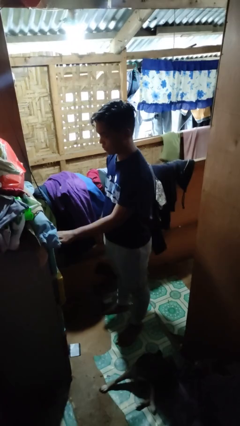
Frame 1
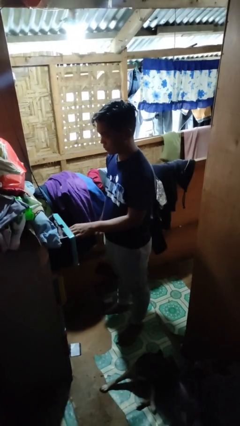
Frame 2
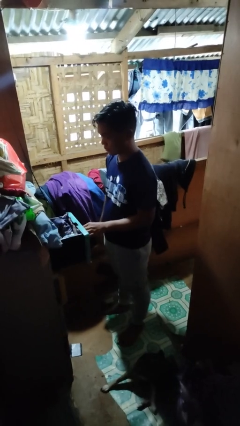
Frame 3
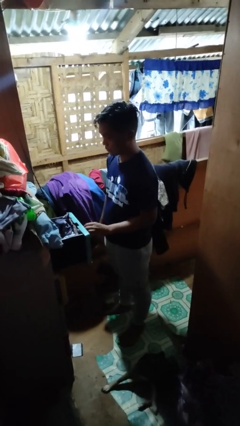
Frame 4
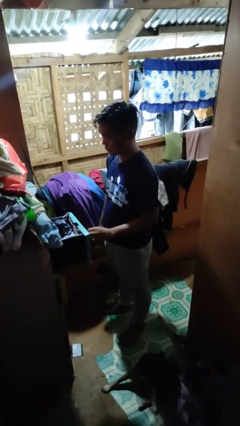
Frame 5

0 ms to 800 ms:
person opens dresser drawer

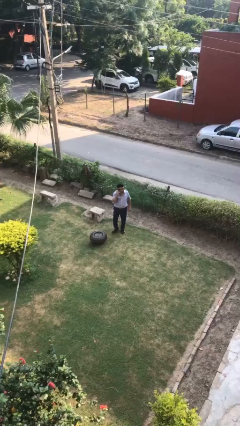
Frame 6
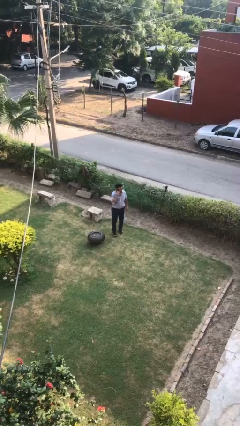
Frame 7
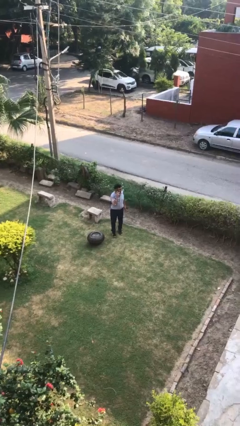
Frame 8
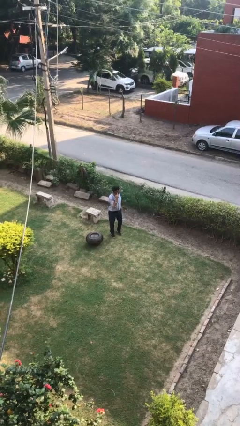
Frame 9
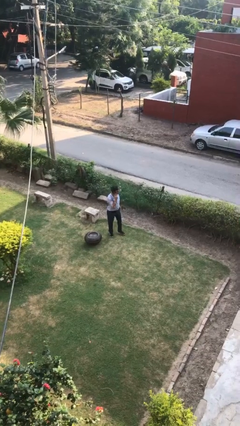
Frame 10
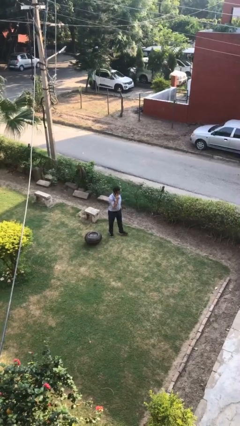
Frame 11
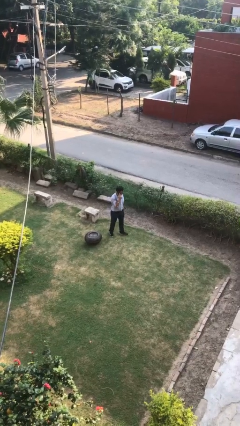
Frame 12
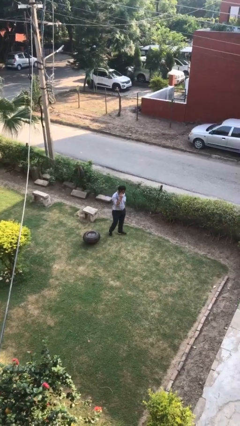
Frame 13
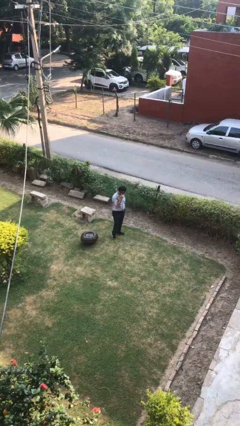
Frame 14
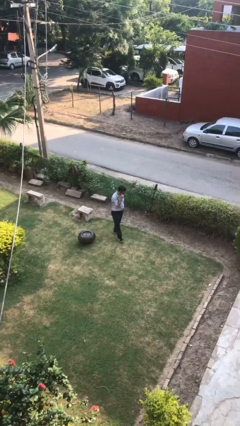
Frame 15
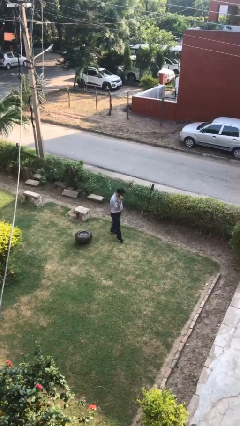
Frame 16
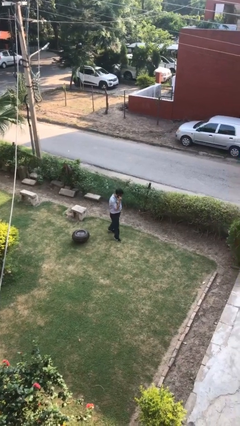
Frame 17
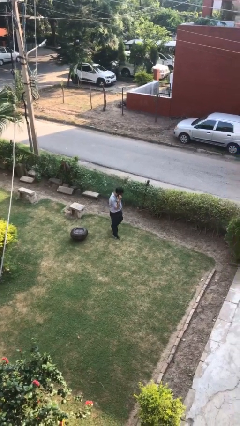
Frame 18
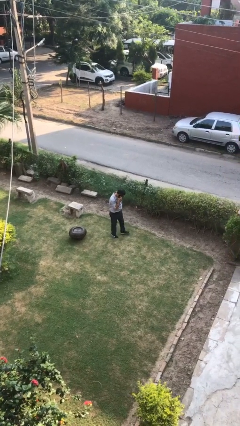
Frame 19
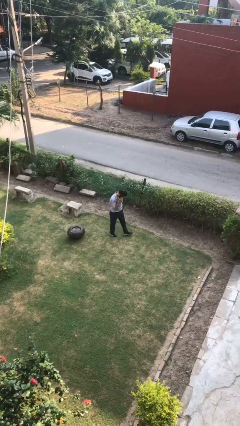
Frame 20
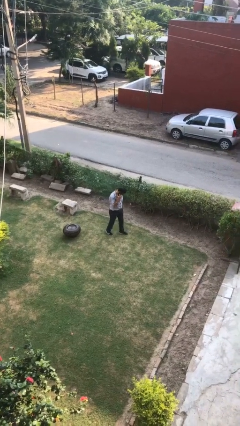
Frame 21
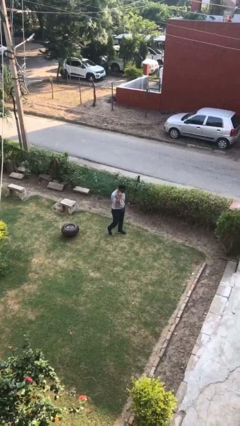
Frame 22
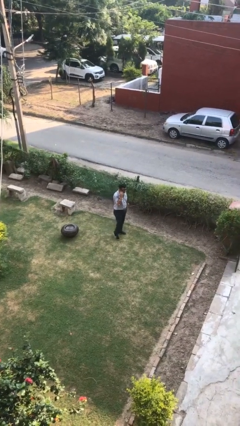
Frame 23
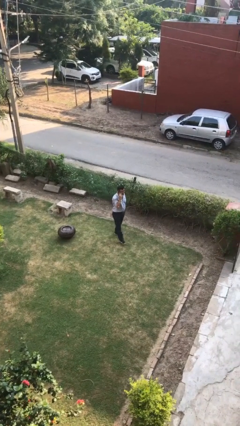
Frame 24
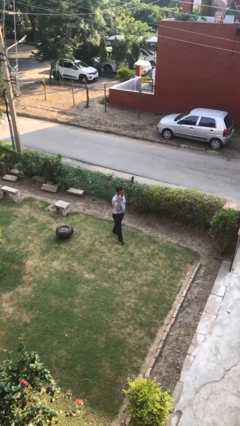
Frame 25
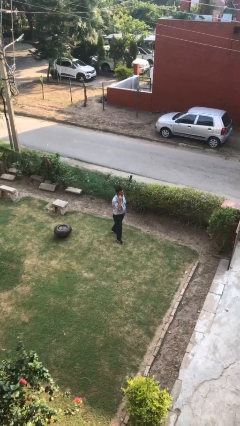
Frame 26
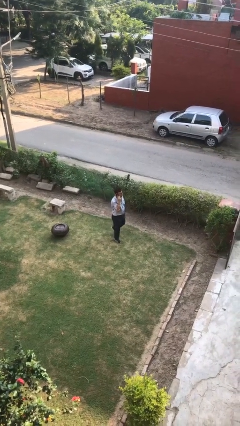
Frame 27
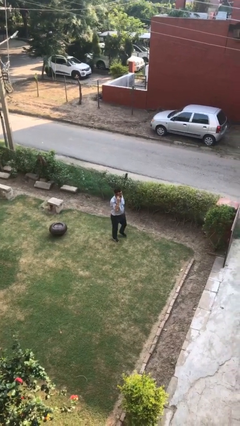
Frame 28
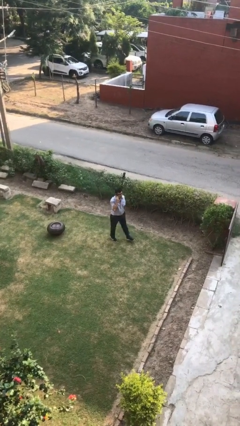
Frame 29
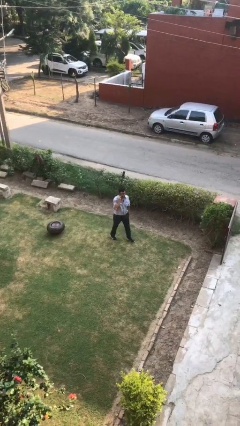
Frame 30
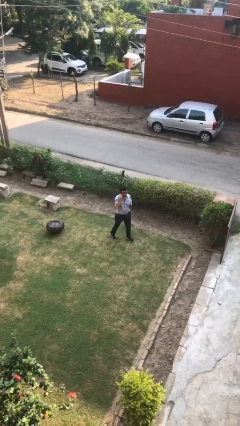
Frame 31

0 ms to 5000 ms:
person talks on phone

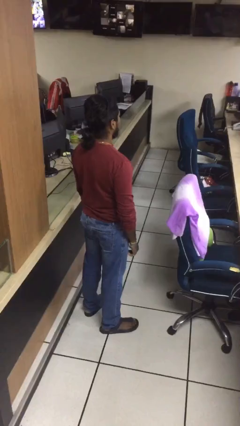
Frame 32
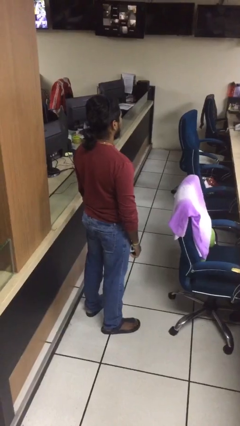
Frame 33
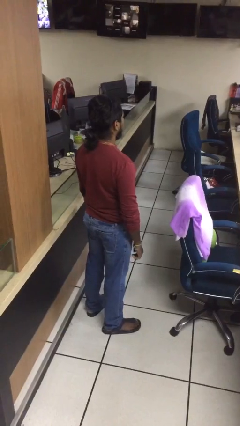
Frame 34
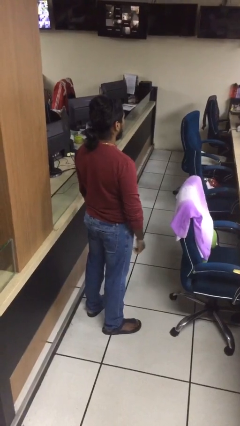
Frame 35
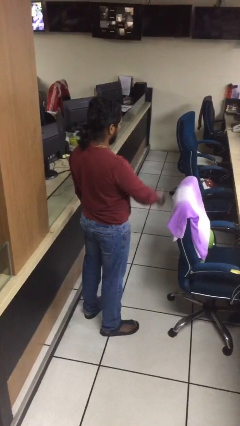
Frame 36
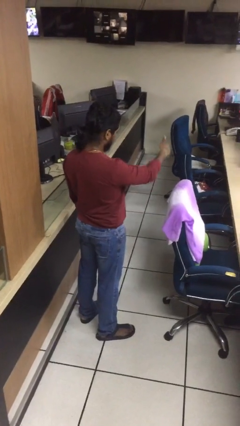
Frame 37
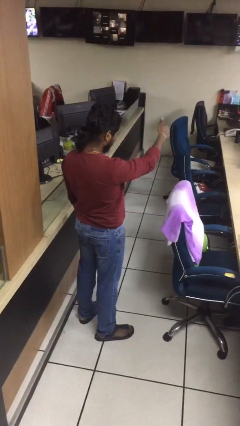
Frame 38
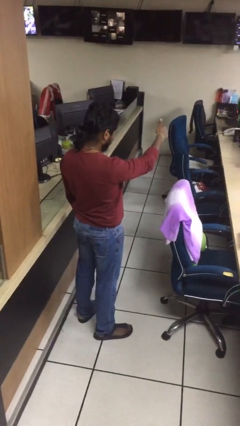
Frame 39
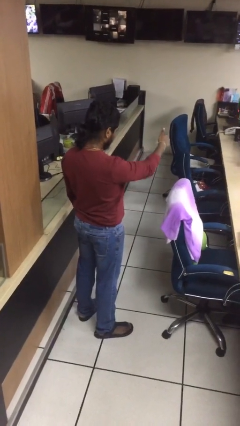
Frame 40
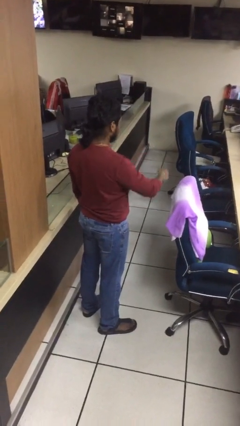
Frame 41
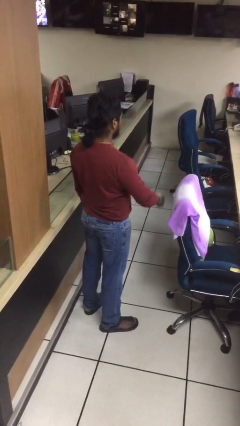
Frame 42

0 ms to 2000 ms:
person gestures thumbs up

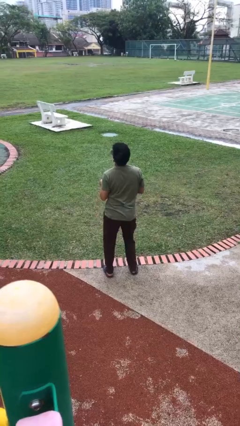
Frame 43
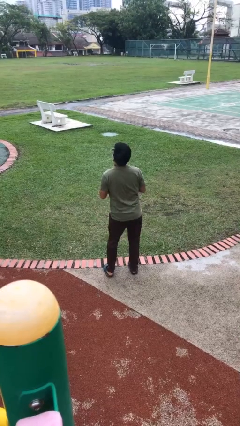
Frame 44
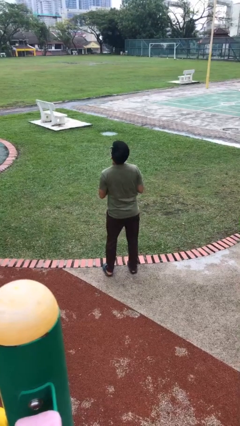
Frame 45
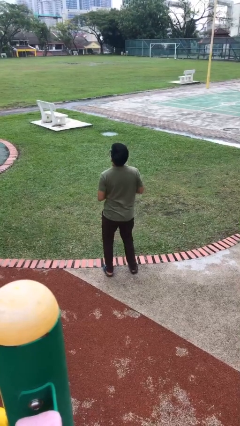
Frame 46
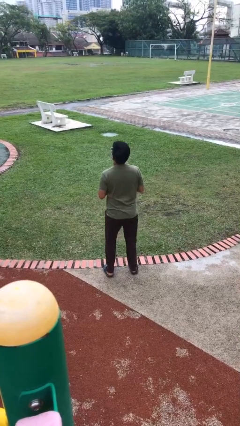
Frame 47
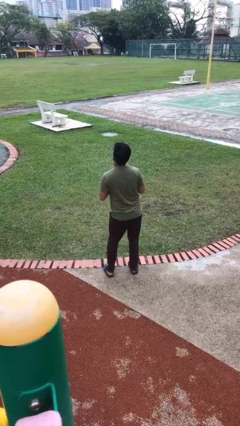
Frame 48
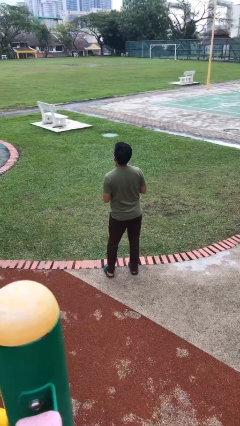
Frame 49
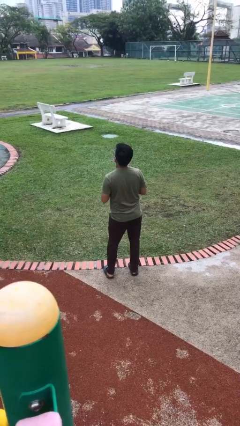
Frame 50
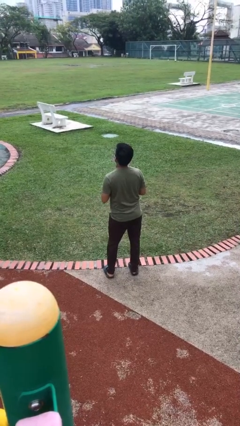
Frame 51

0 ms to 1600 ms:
person wiggles hips

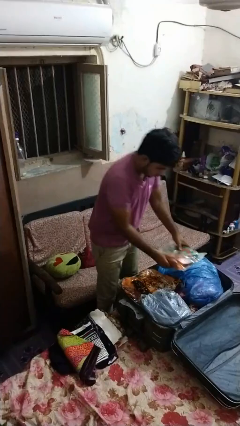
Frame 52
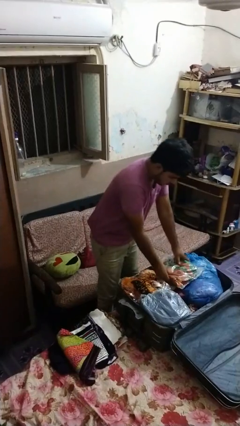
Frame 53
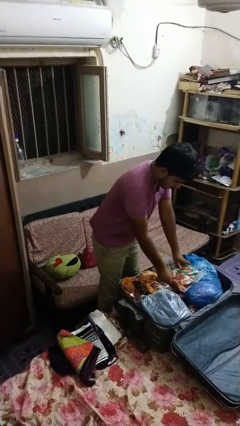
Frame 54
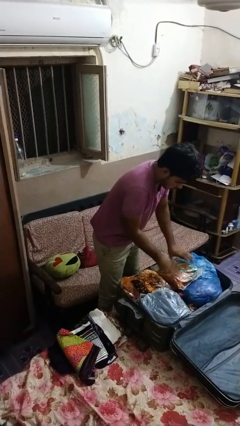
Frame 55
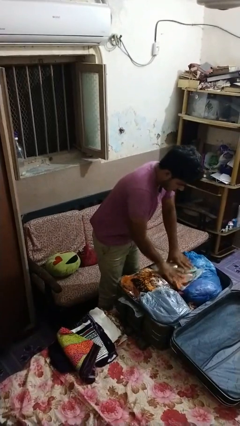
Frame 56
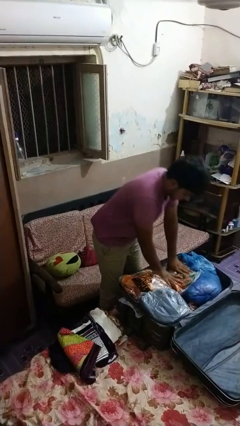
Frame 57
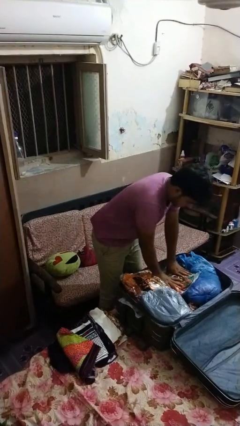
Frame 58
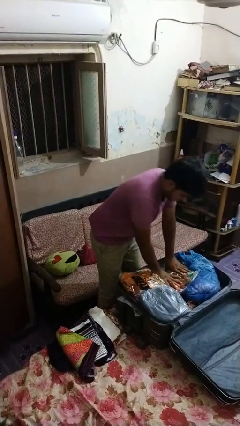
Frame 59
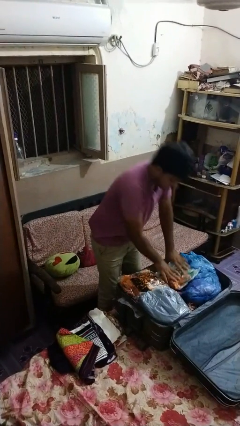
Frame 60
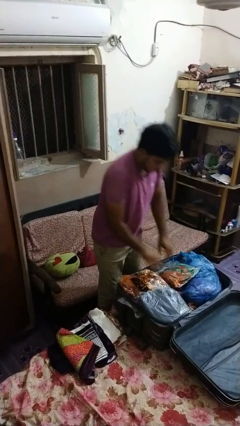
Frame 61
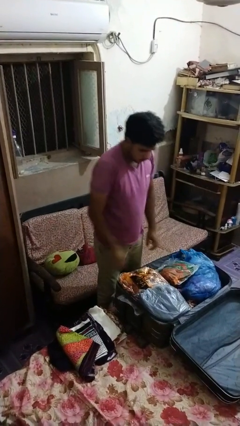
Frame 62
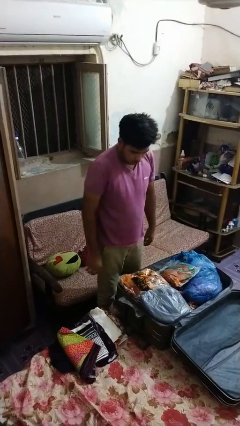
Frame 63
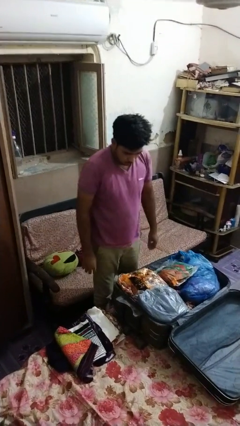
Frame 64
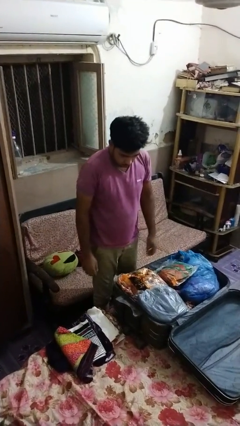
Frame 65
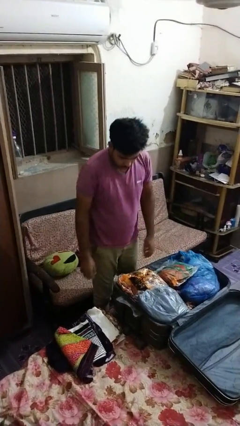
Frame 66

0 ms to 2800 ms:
person loads clothes into suitcase

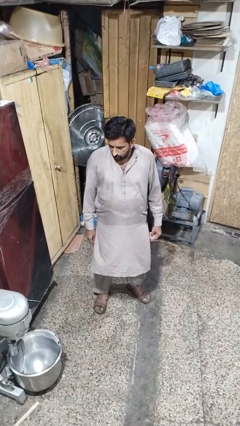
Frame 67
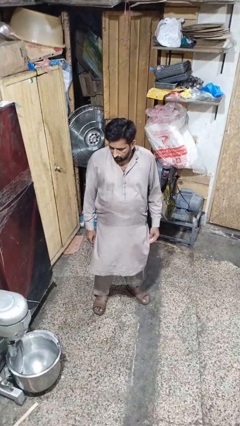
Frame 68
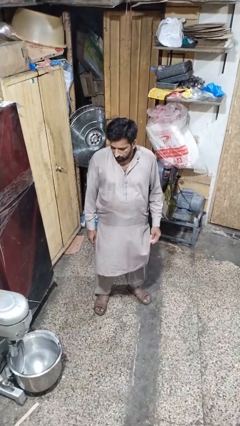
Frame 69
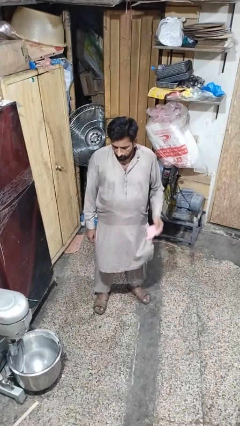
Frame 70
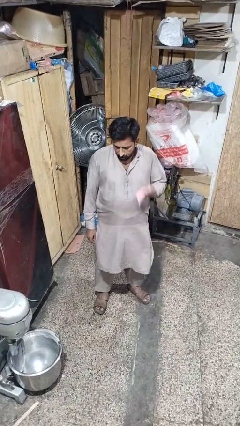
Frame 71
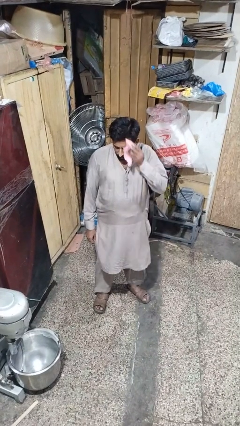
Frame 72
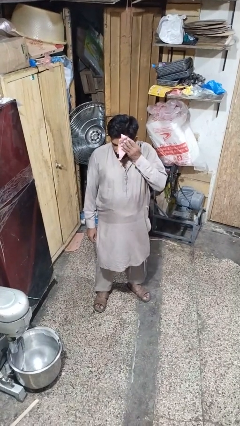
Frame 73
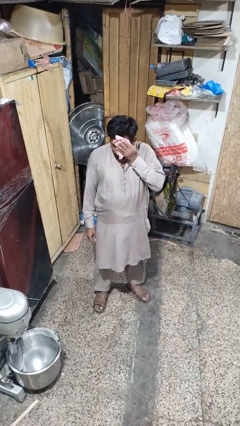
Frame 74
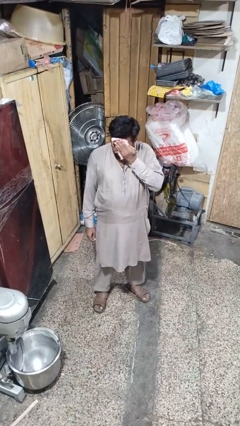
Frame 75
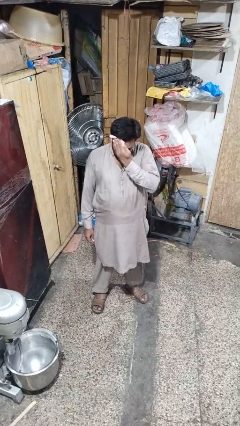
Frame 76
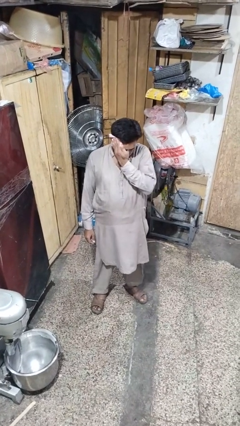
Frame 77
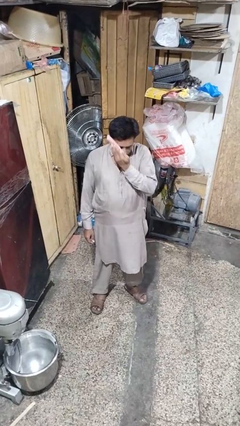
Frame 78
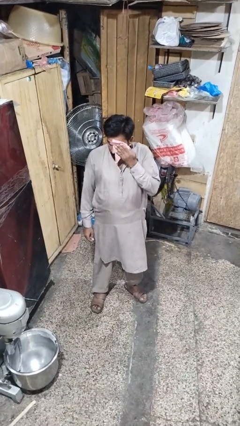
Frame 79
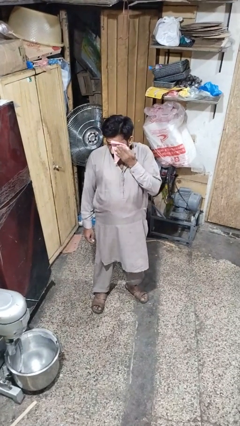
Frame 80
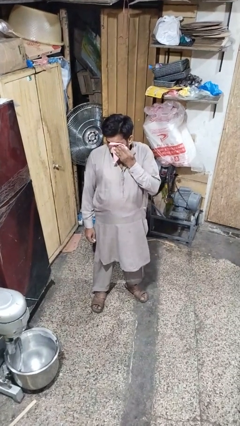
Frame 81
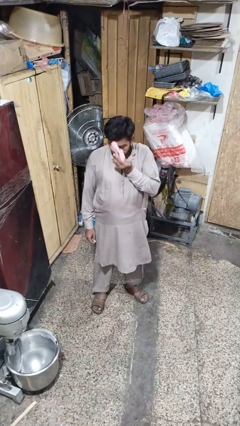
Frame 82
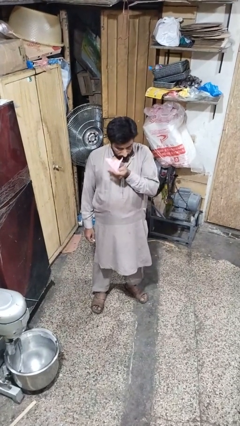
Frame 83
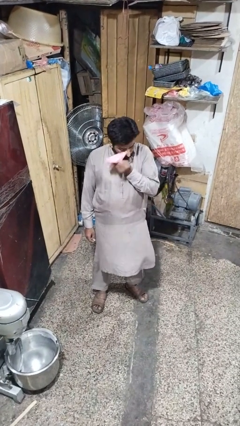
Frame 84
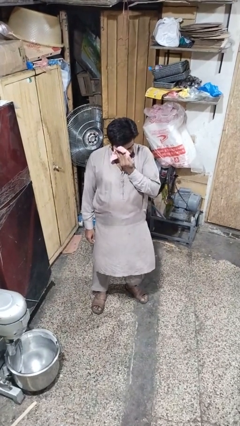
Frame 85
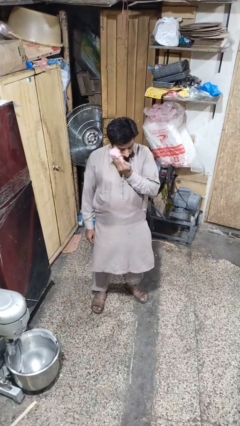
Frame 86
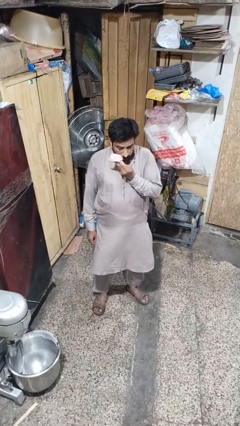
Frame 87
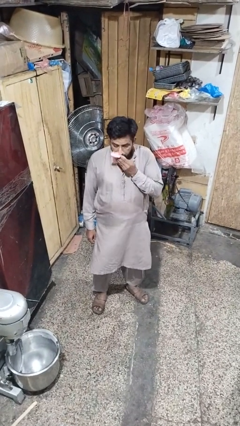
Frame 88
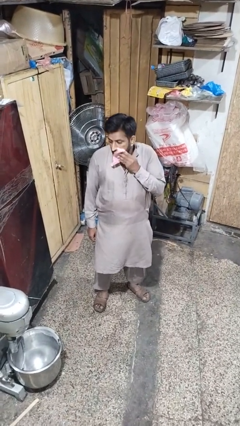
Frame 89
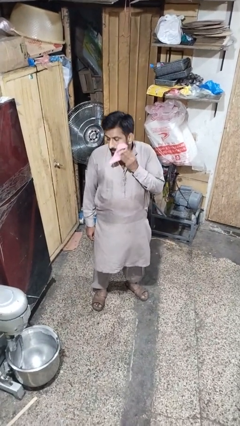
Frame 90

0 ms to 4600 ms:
person wipes mouth with napkin

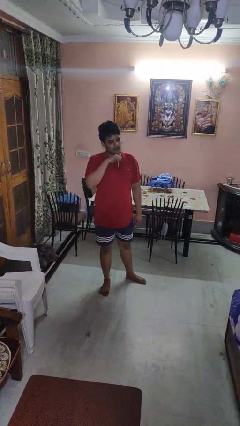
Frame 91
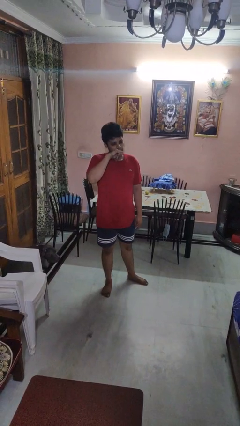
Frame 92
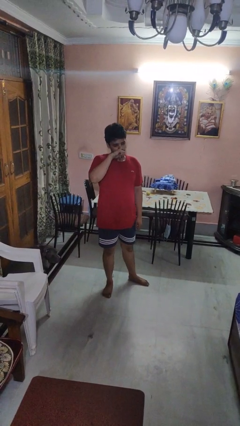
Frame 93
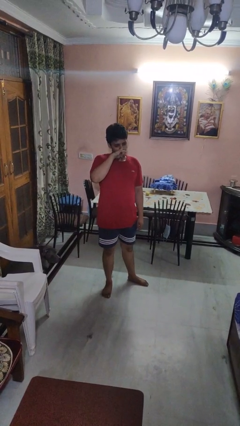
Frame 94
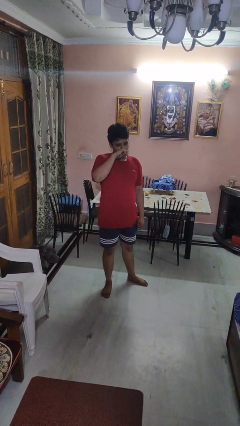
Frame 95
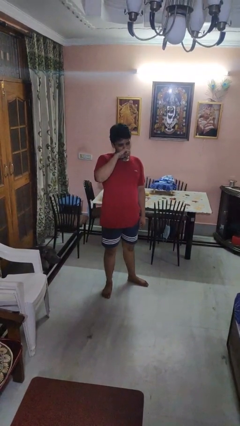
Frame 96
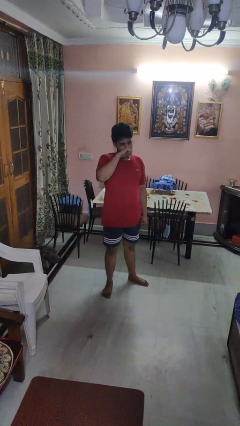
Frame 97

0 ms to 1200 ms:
person vapes
